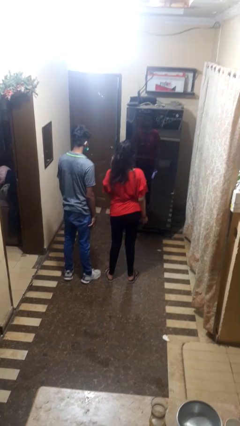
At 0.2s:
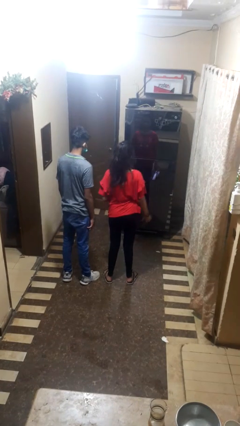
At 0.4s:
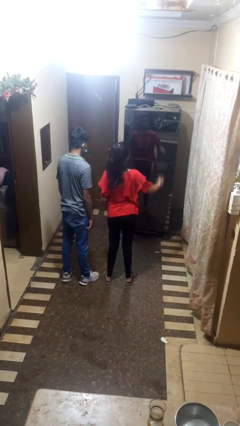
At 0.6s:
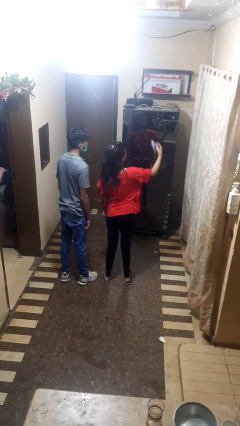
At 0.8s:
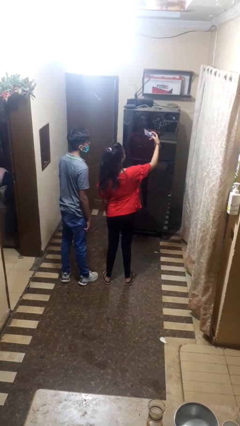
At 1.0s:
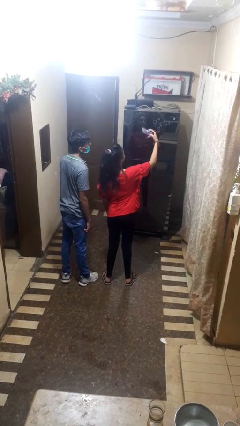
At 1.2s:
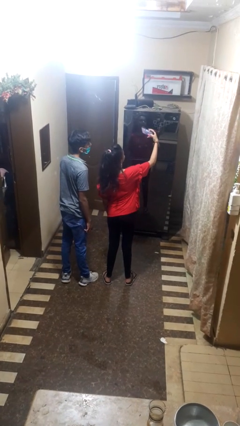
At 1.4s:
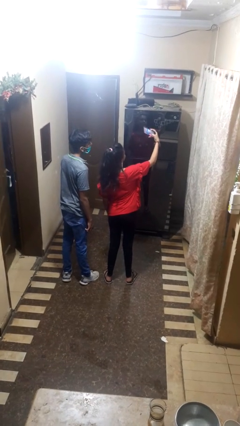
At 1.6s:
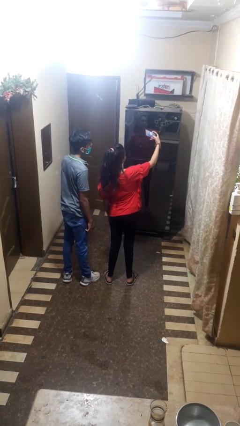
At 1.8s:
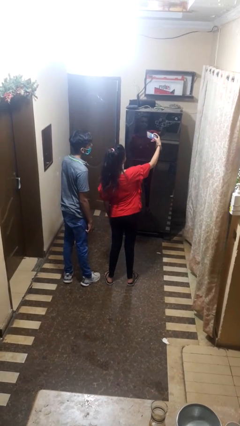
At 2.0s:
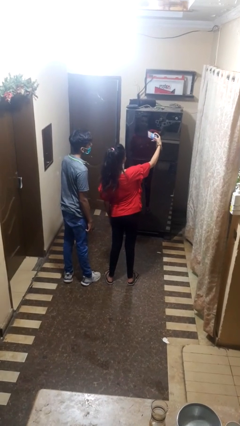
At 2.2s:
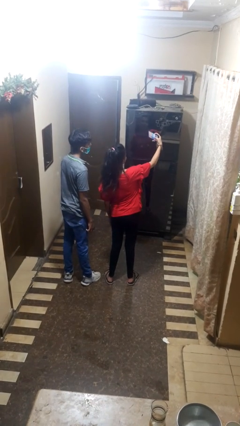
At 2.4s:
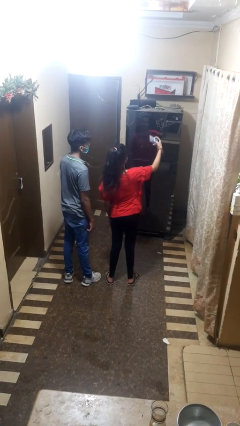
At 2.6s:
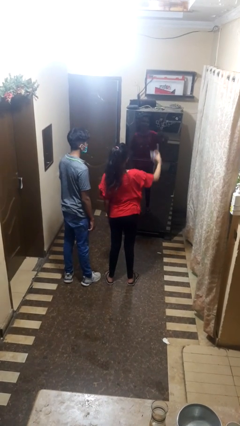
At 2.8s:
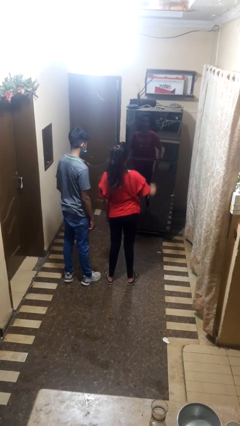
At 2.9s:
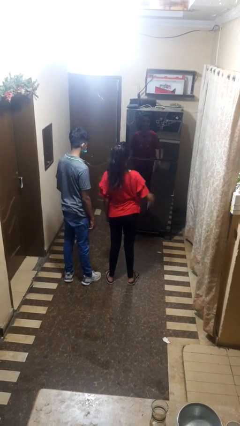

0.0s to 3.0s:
person takes selfie with person

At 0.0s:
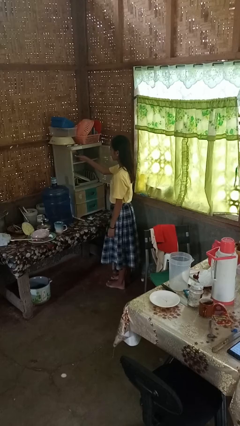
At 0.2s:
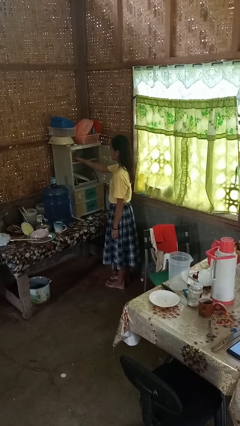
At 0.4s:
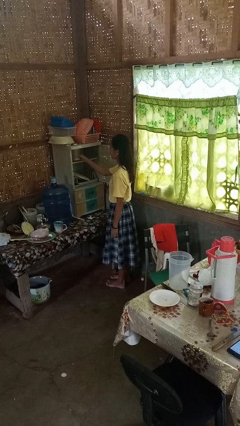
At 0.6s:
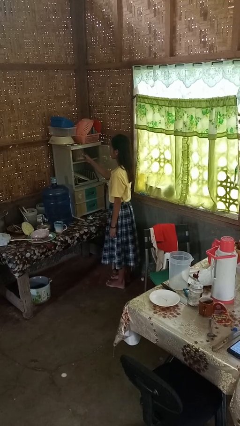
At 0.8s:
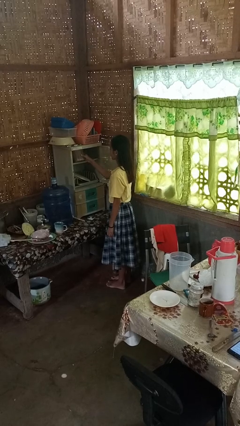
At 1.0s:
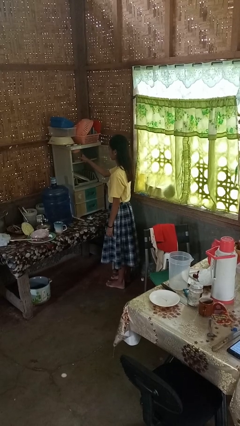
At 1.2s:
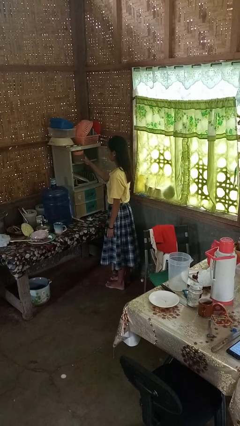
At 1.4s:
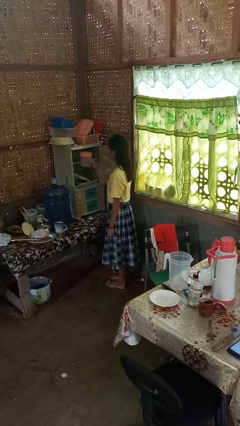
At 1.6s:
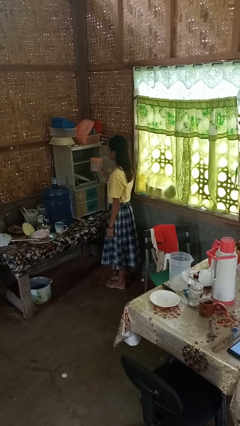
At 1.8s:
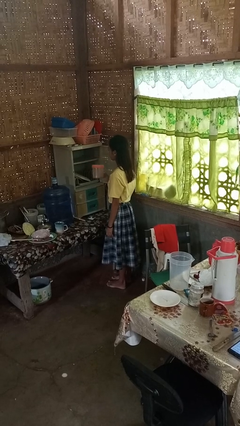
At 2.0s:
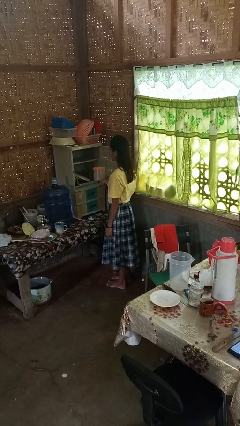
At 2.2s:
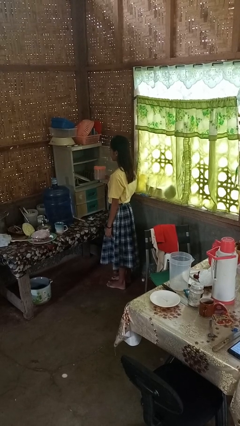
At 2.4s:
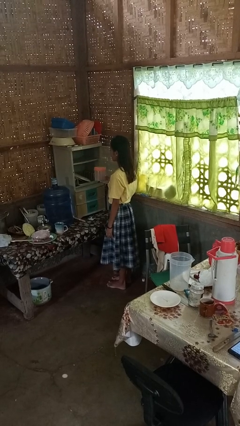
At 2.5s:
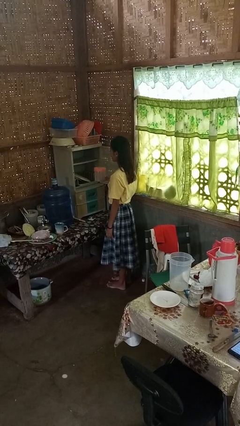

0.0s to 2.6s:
person picks up object from cabinet

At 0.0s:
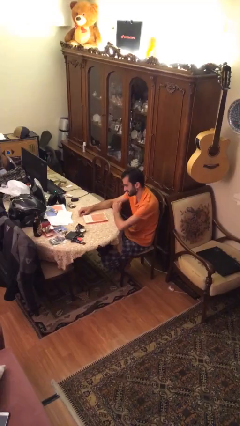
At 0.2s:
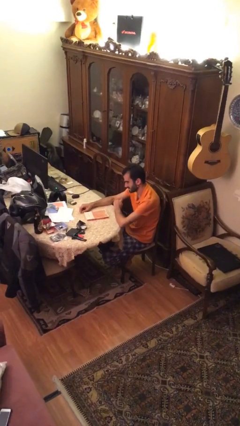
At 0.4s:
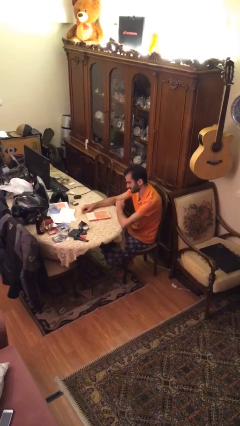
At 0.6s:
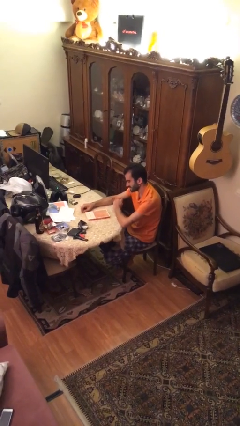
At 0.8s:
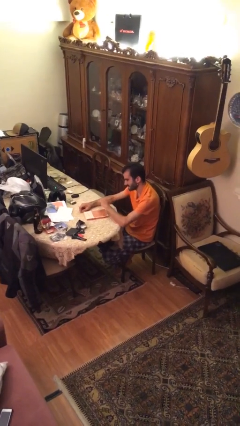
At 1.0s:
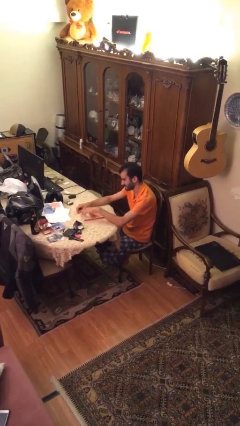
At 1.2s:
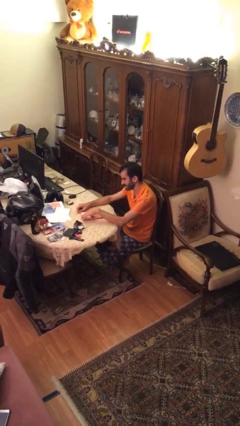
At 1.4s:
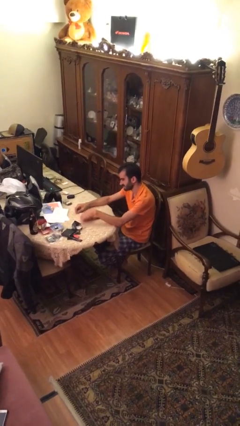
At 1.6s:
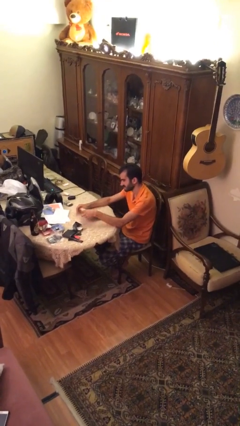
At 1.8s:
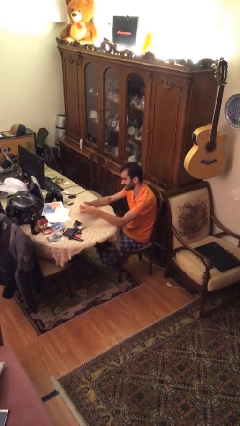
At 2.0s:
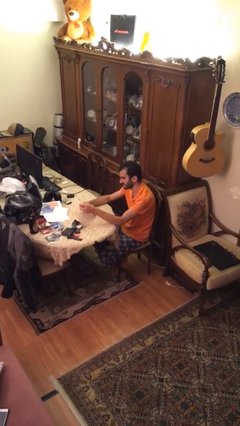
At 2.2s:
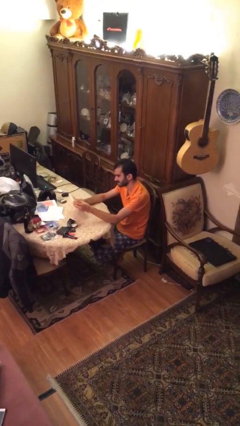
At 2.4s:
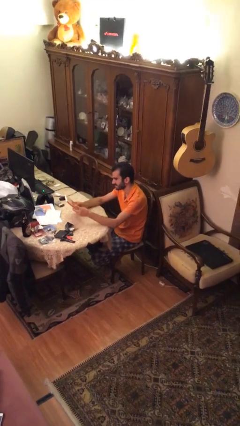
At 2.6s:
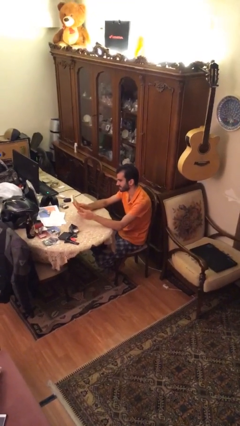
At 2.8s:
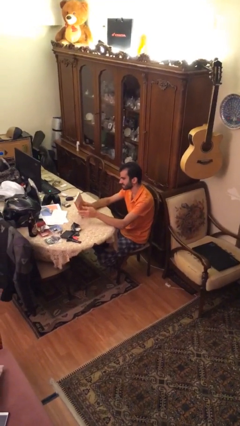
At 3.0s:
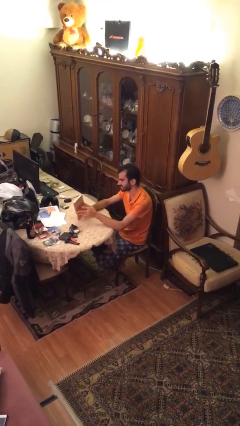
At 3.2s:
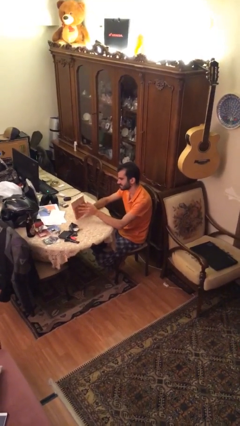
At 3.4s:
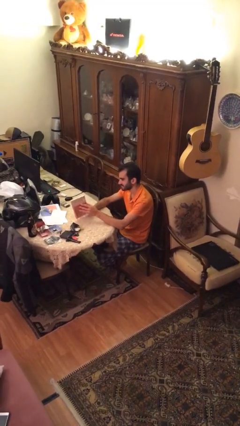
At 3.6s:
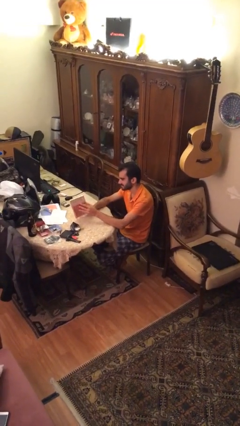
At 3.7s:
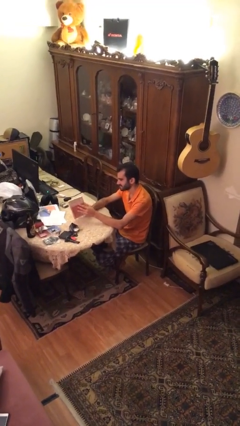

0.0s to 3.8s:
person picks up object from table

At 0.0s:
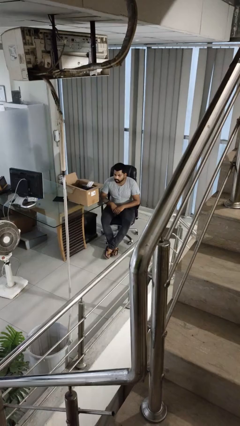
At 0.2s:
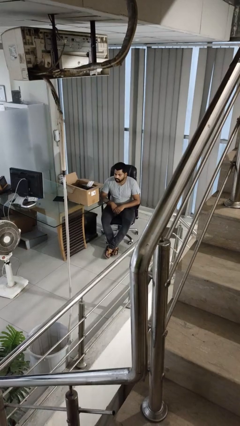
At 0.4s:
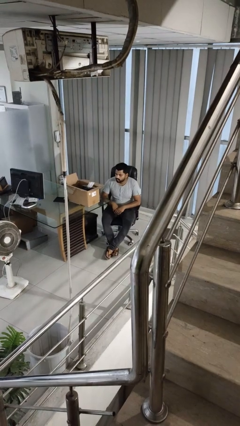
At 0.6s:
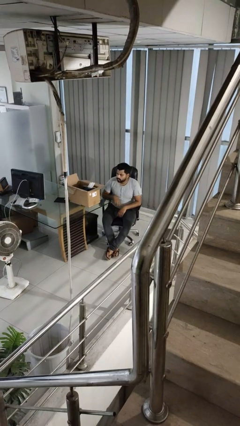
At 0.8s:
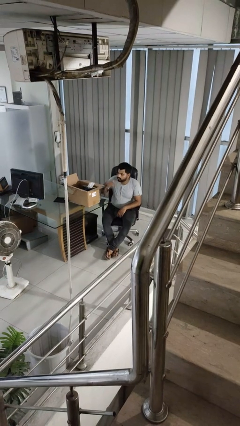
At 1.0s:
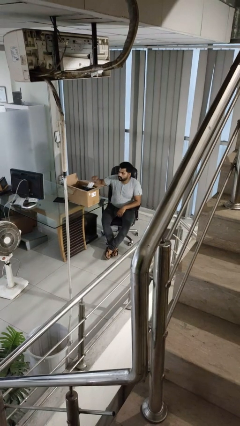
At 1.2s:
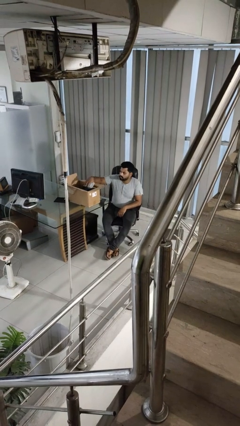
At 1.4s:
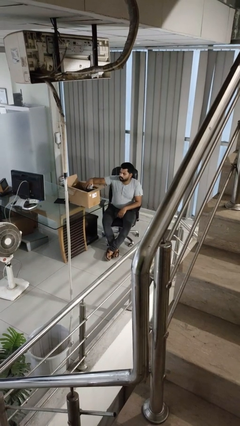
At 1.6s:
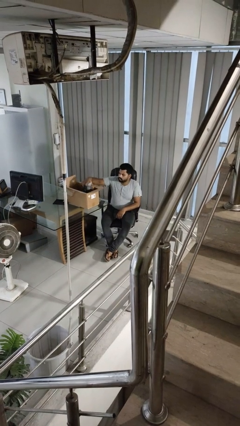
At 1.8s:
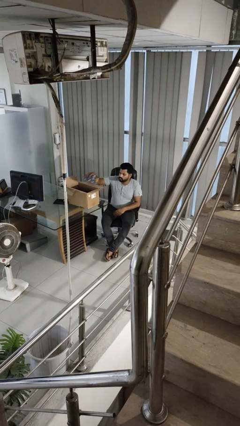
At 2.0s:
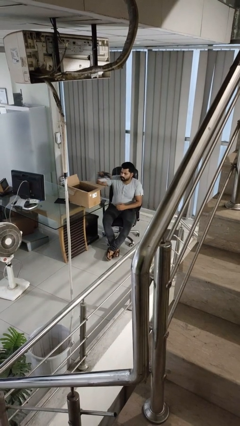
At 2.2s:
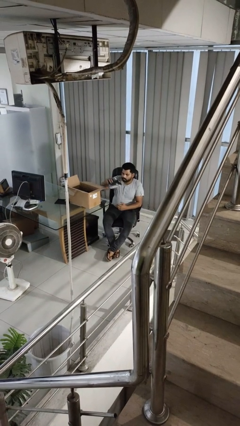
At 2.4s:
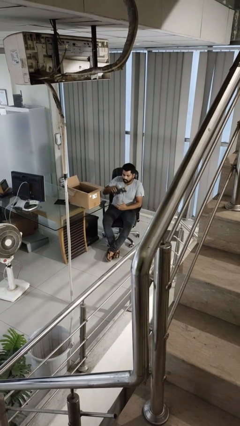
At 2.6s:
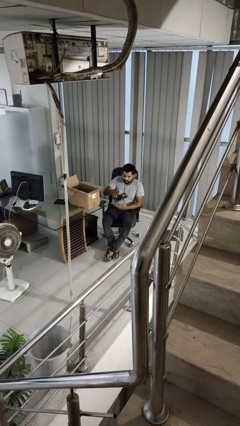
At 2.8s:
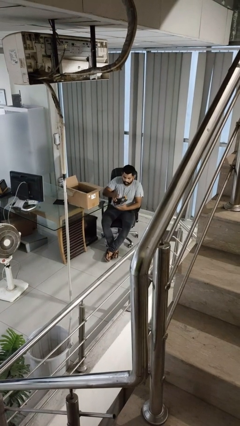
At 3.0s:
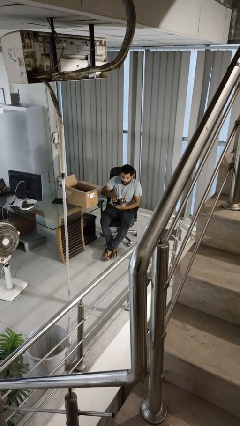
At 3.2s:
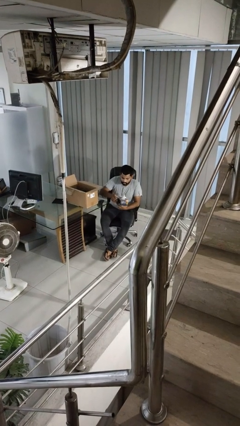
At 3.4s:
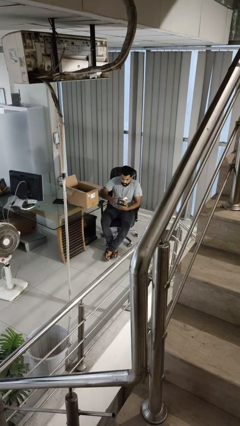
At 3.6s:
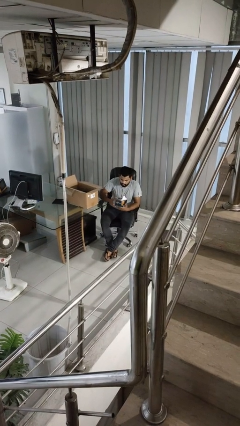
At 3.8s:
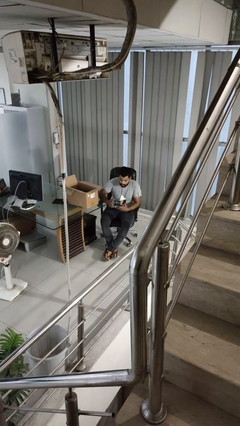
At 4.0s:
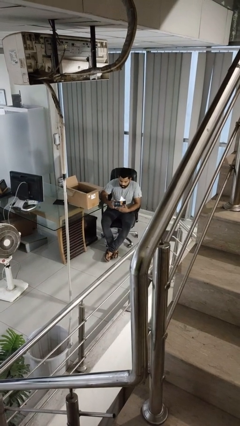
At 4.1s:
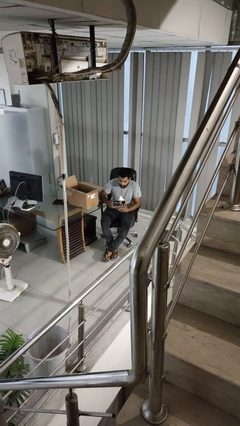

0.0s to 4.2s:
person takes object from box

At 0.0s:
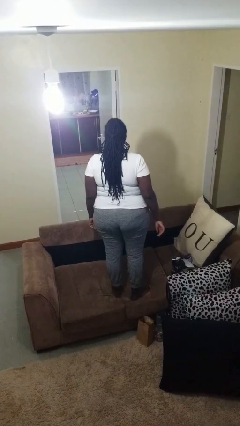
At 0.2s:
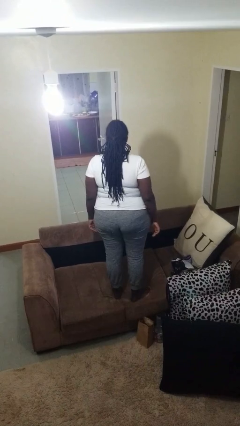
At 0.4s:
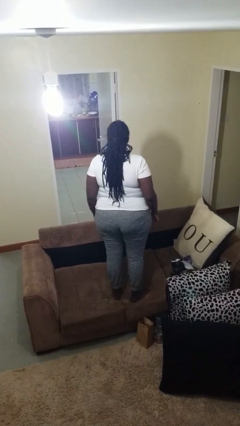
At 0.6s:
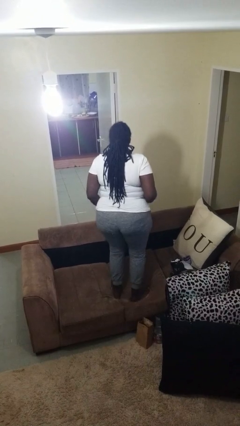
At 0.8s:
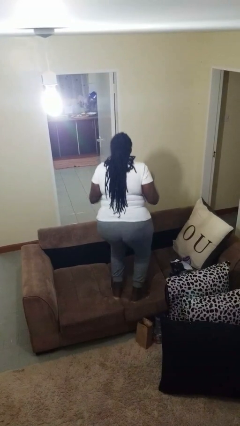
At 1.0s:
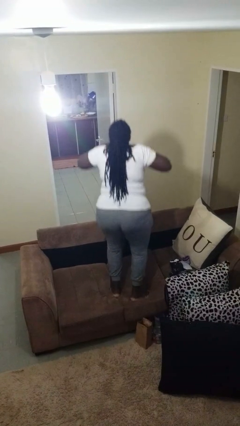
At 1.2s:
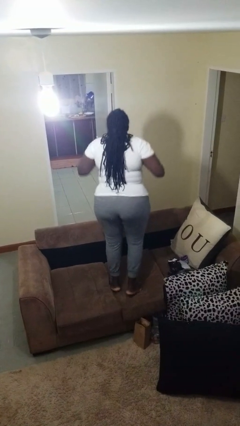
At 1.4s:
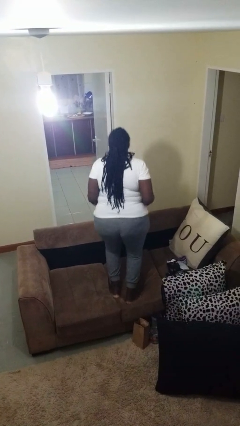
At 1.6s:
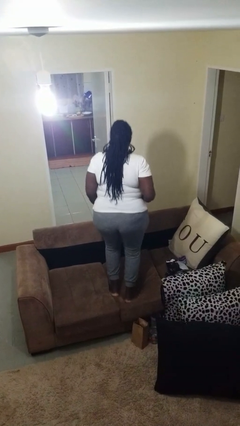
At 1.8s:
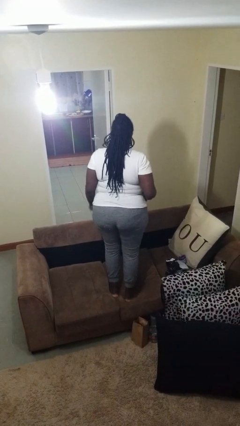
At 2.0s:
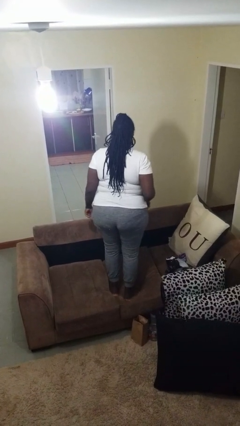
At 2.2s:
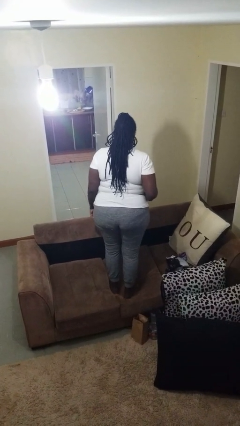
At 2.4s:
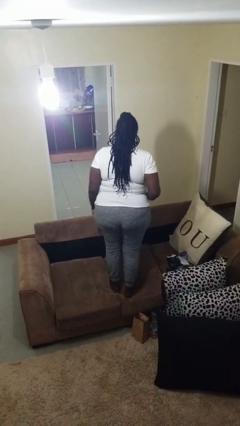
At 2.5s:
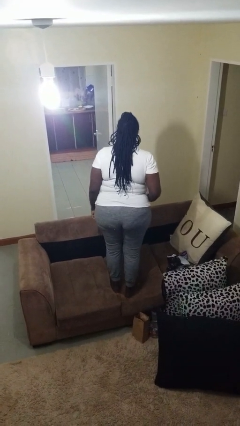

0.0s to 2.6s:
person jumps on couch

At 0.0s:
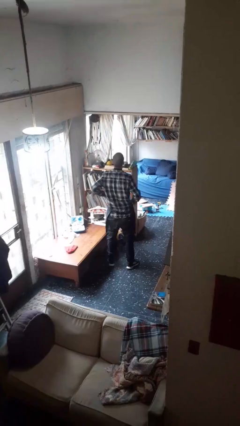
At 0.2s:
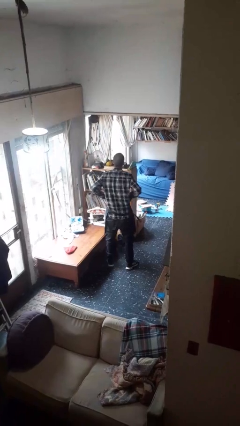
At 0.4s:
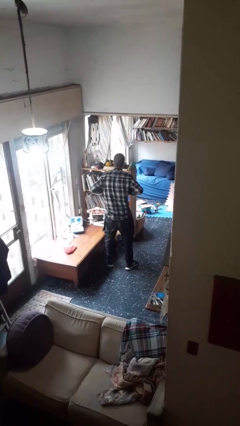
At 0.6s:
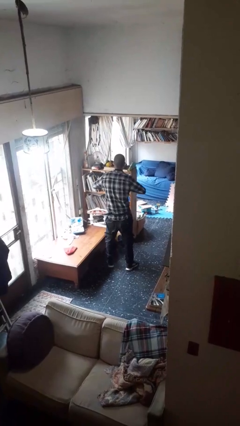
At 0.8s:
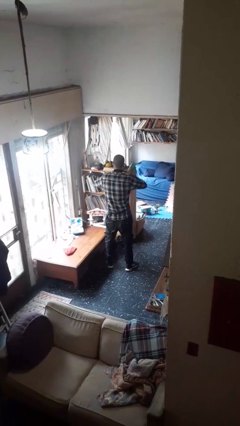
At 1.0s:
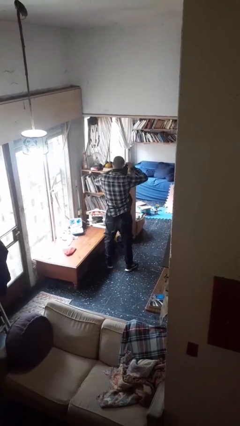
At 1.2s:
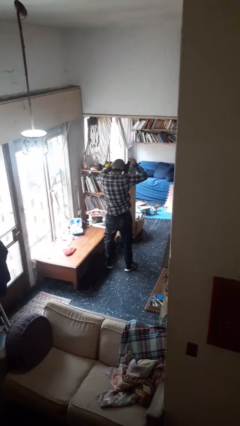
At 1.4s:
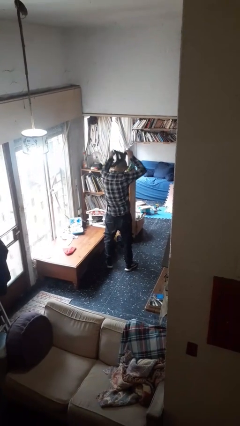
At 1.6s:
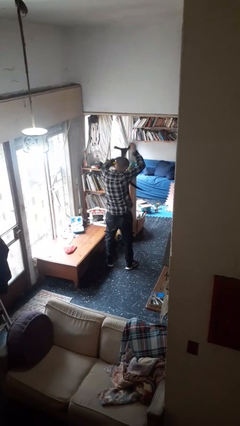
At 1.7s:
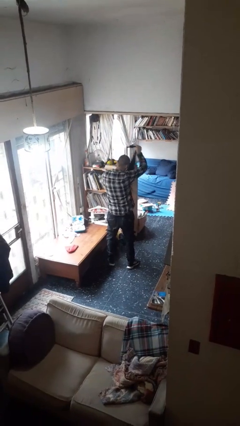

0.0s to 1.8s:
person takes off apron
